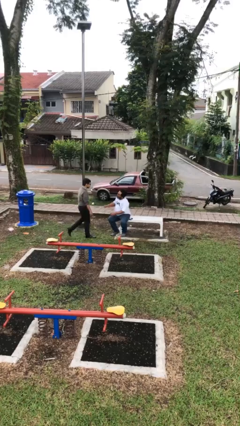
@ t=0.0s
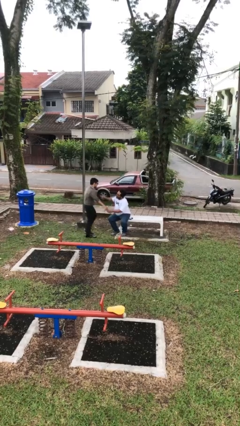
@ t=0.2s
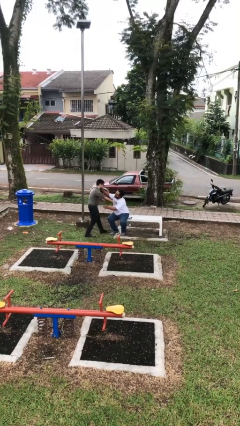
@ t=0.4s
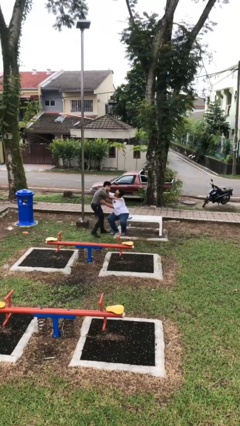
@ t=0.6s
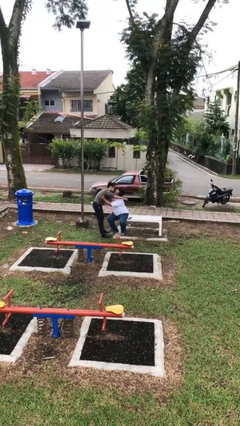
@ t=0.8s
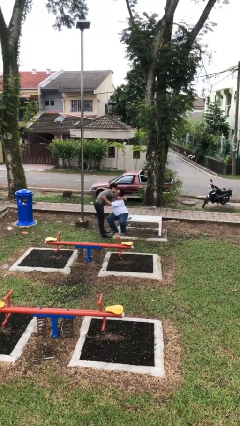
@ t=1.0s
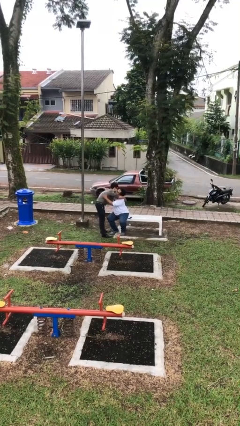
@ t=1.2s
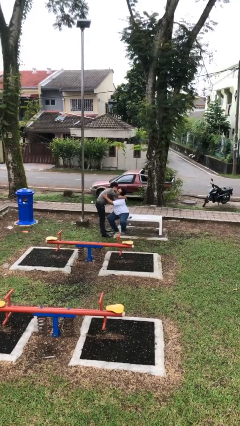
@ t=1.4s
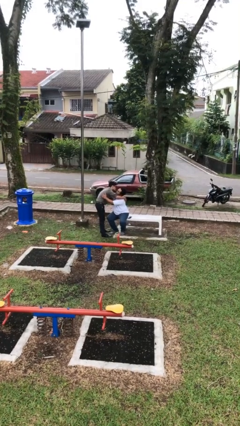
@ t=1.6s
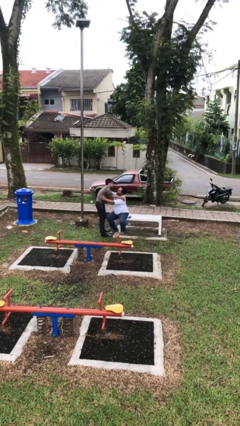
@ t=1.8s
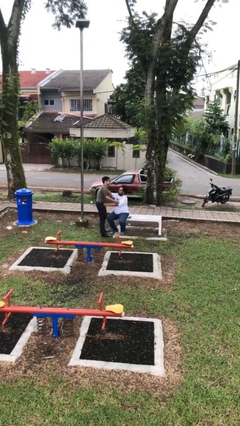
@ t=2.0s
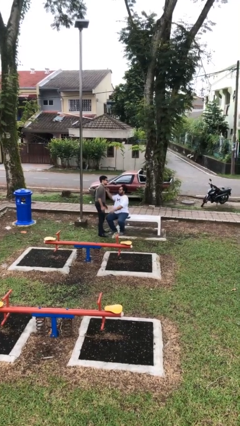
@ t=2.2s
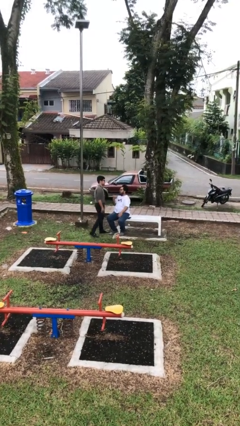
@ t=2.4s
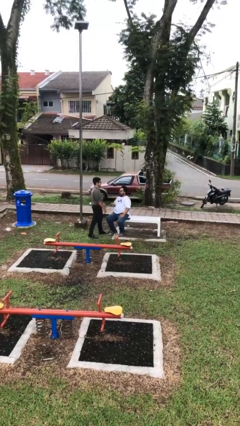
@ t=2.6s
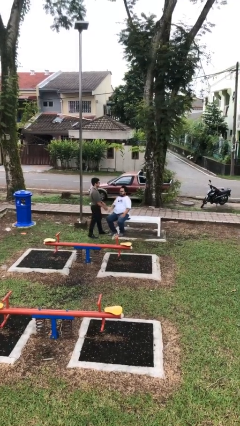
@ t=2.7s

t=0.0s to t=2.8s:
person embraces person

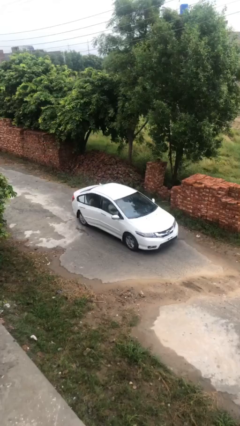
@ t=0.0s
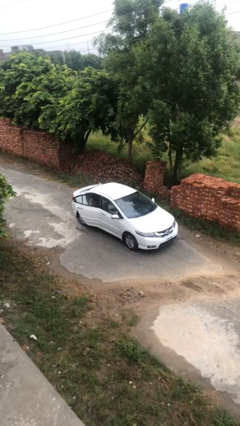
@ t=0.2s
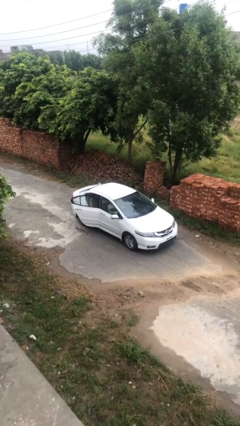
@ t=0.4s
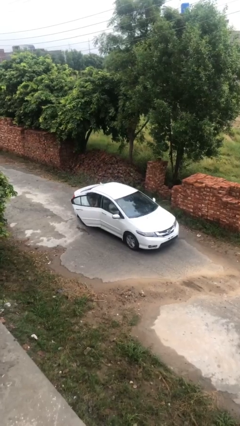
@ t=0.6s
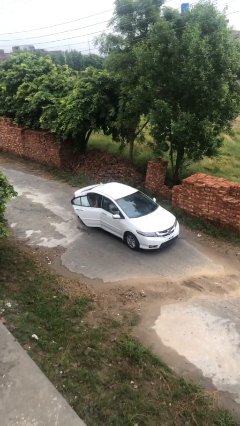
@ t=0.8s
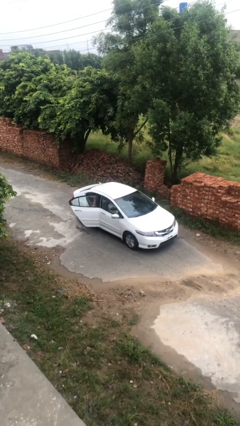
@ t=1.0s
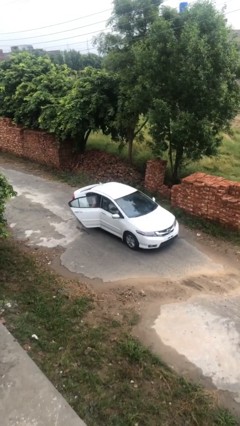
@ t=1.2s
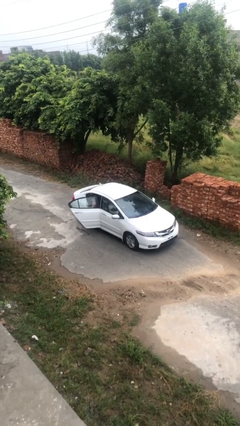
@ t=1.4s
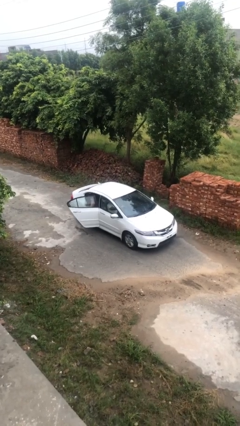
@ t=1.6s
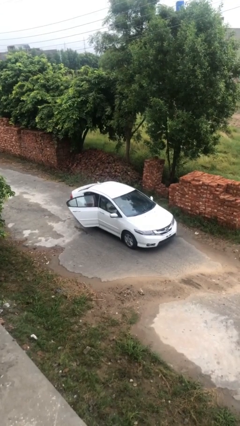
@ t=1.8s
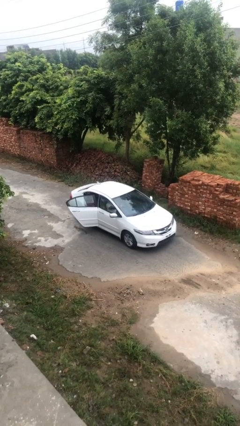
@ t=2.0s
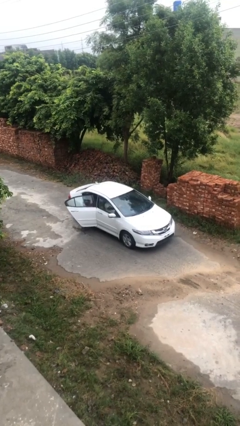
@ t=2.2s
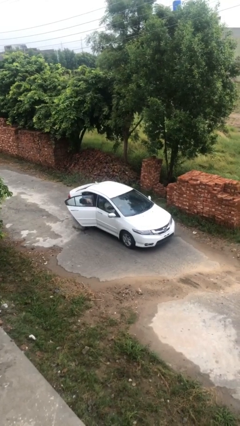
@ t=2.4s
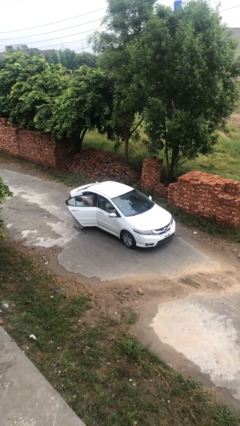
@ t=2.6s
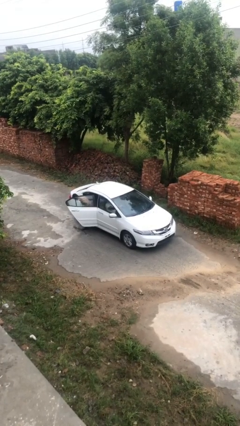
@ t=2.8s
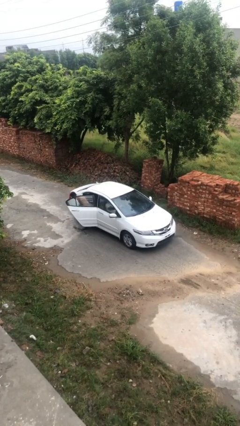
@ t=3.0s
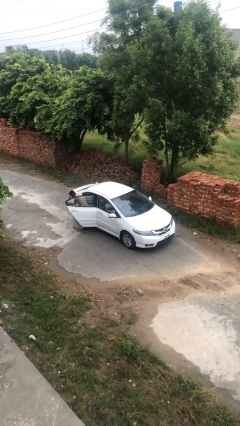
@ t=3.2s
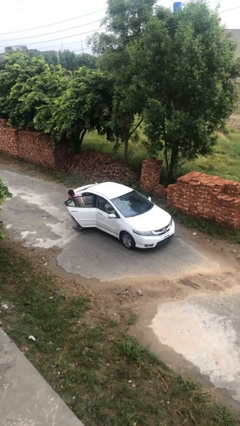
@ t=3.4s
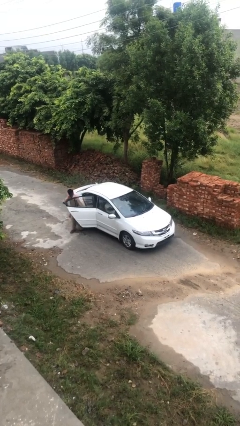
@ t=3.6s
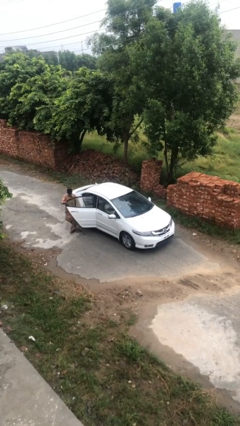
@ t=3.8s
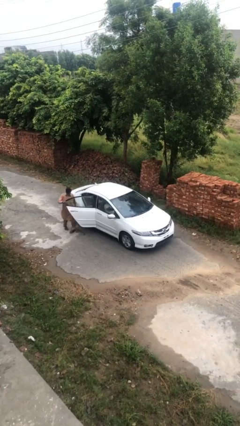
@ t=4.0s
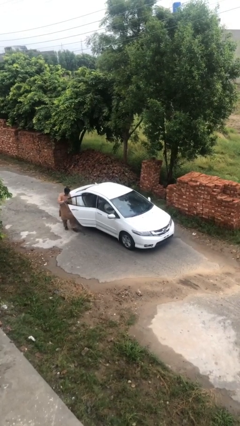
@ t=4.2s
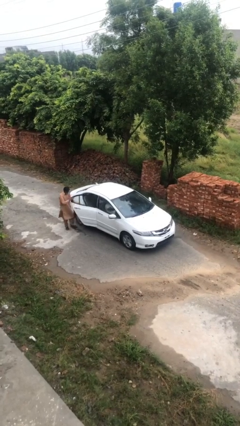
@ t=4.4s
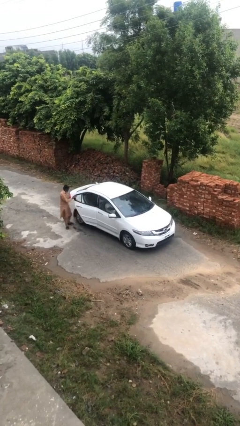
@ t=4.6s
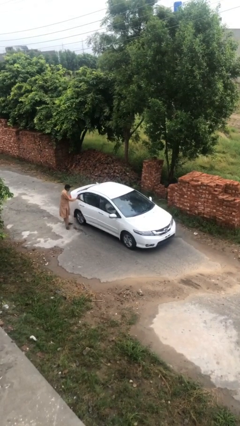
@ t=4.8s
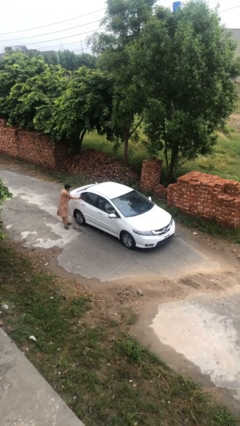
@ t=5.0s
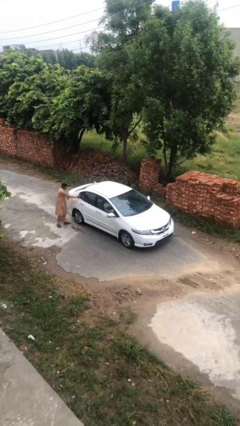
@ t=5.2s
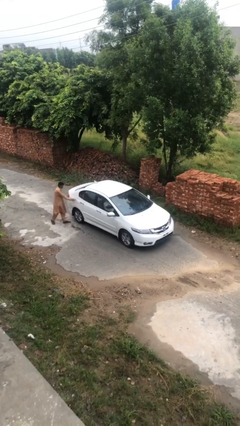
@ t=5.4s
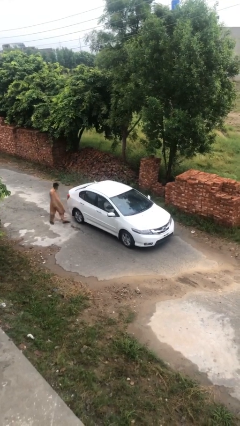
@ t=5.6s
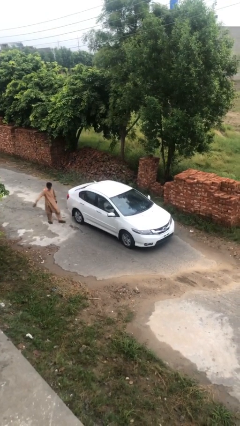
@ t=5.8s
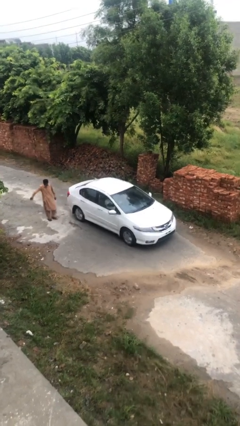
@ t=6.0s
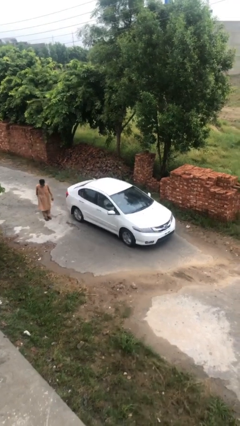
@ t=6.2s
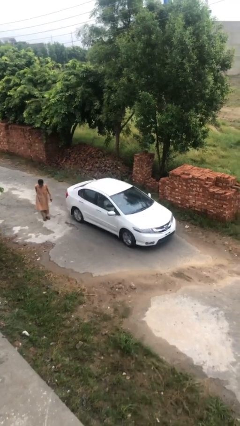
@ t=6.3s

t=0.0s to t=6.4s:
car drops off person

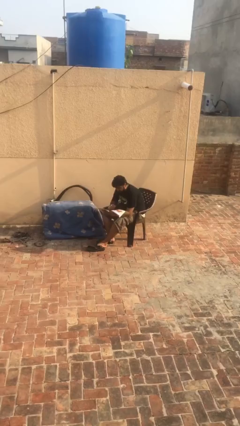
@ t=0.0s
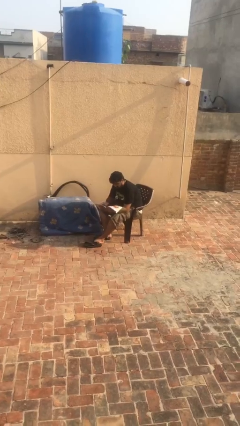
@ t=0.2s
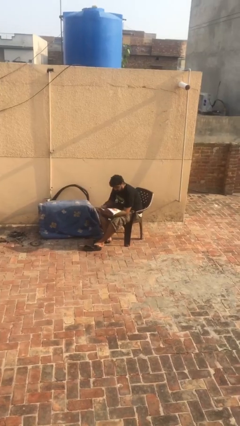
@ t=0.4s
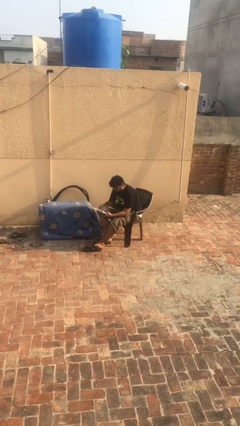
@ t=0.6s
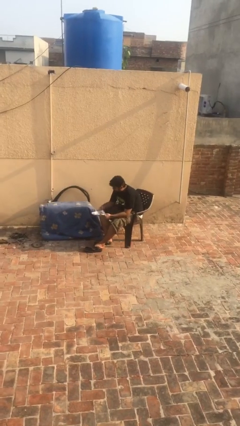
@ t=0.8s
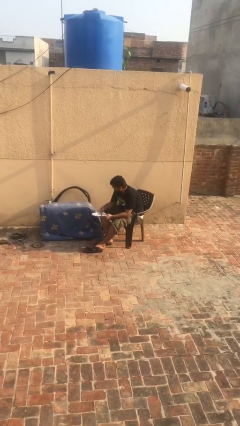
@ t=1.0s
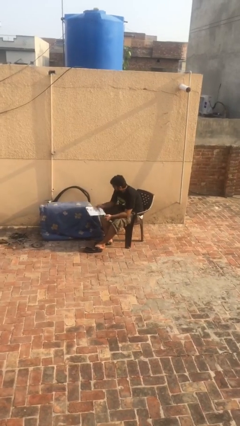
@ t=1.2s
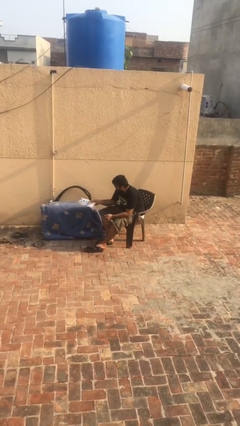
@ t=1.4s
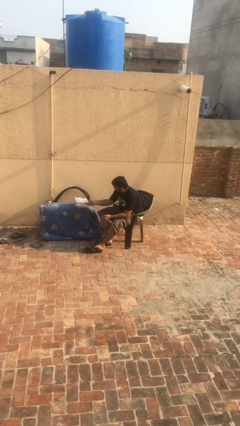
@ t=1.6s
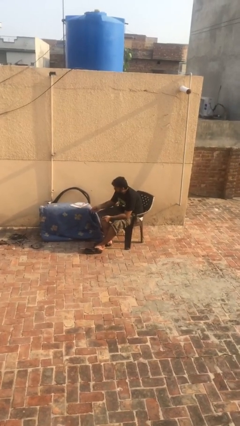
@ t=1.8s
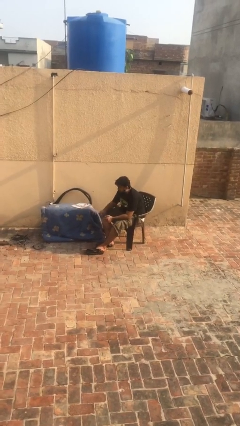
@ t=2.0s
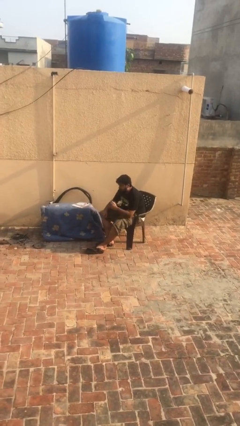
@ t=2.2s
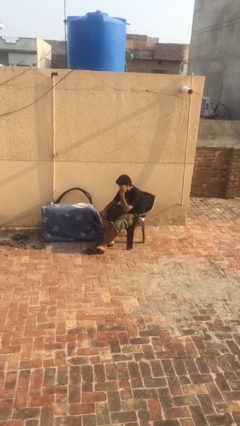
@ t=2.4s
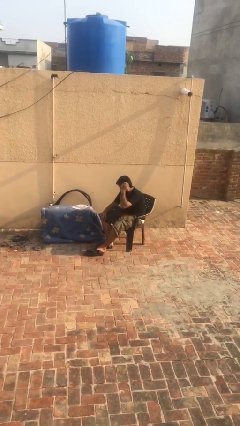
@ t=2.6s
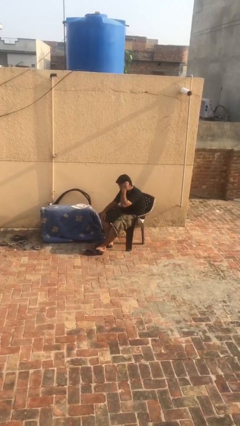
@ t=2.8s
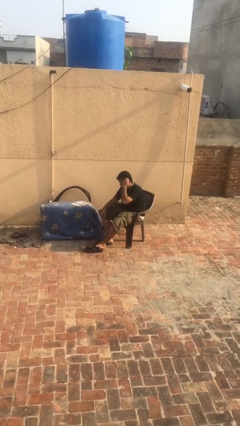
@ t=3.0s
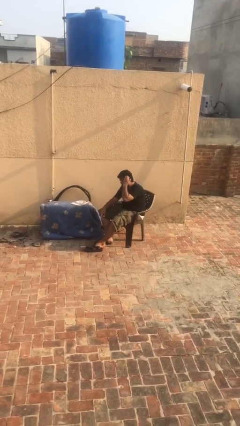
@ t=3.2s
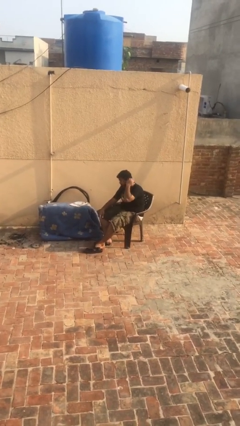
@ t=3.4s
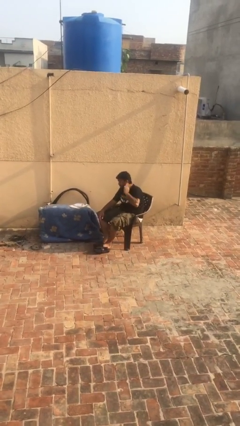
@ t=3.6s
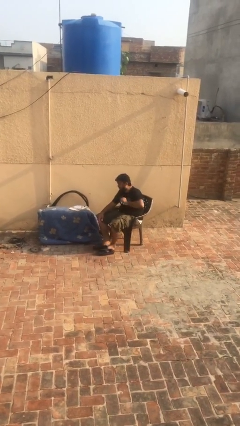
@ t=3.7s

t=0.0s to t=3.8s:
person puts down object on table

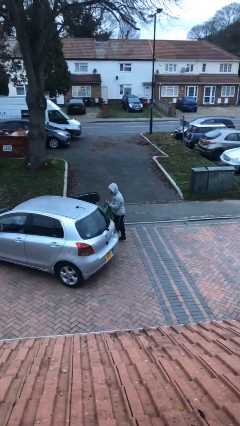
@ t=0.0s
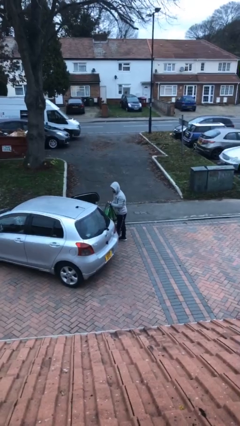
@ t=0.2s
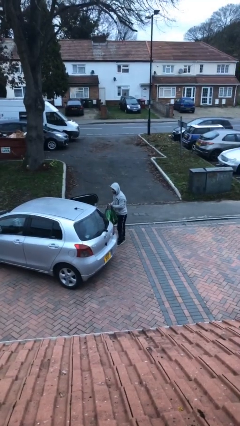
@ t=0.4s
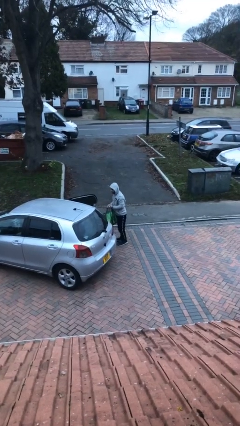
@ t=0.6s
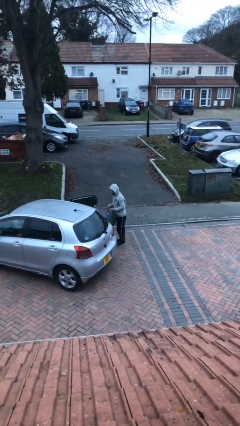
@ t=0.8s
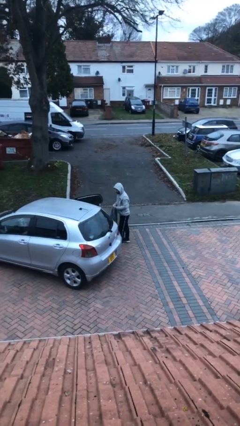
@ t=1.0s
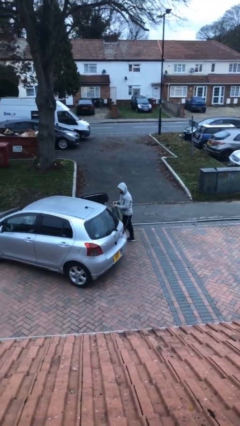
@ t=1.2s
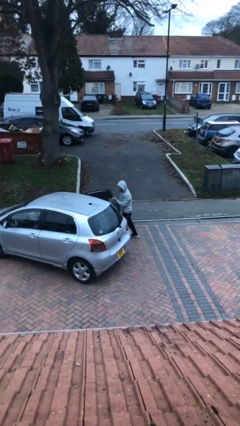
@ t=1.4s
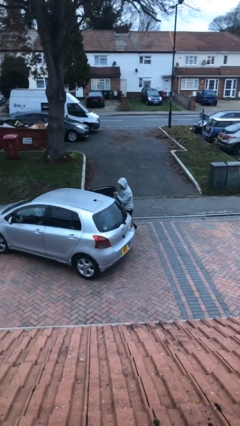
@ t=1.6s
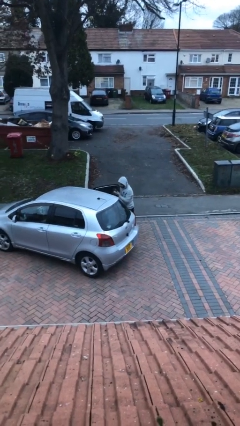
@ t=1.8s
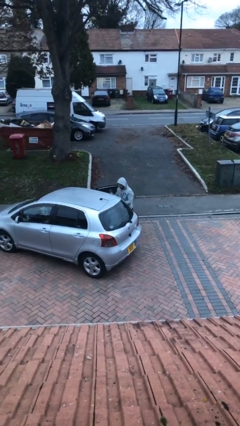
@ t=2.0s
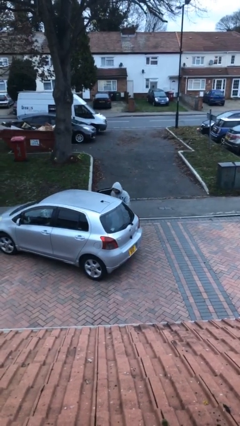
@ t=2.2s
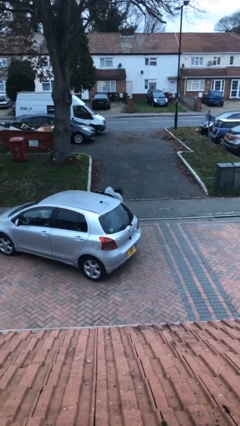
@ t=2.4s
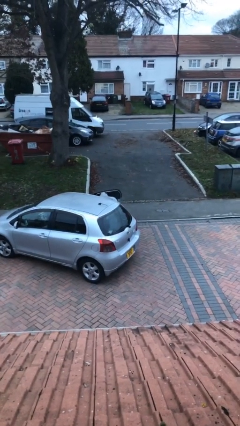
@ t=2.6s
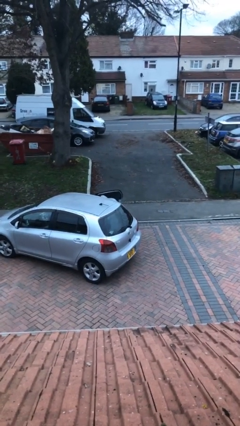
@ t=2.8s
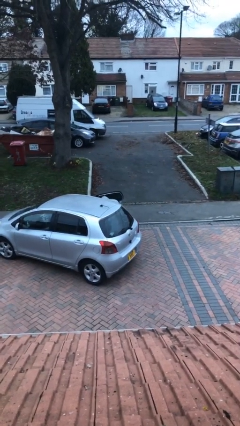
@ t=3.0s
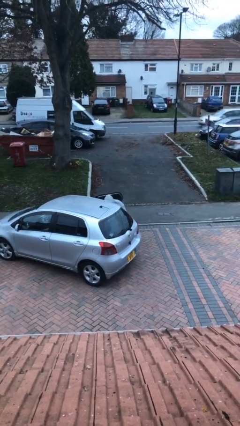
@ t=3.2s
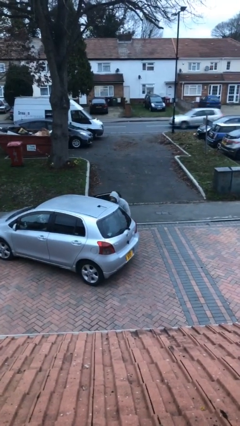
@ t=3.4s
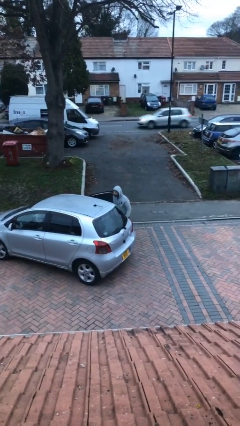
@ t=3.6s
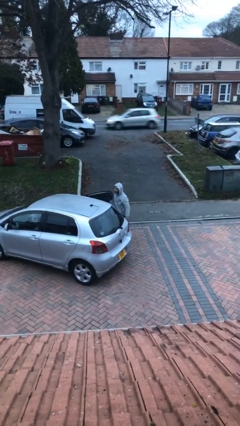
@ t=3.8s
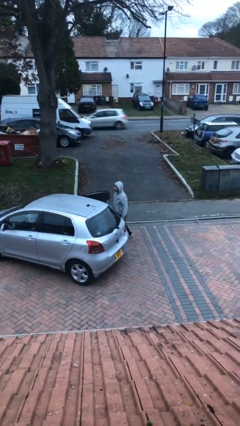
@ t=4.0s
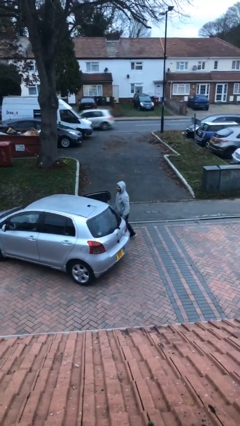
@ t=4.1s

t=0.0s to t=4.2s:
person loads car

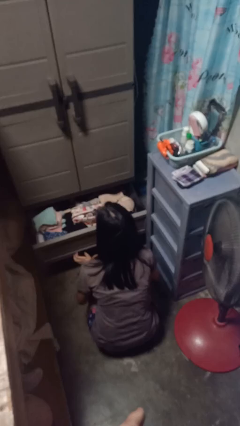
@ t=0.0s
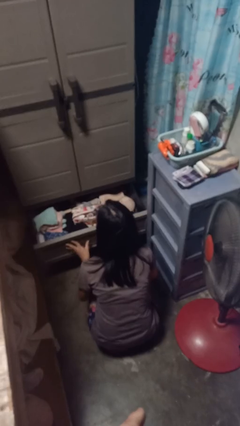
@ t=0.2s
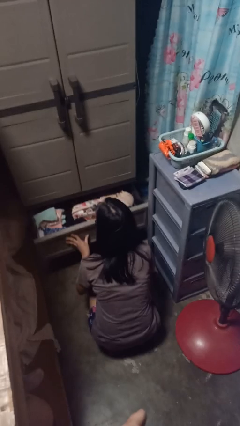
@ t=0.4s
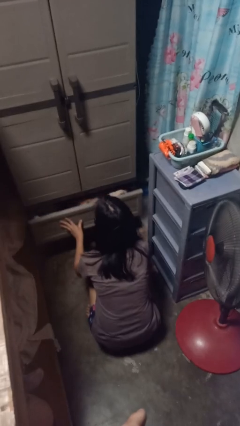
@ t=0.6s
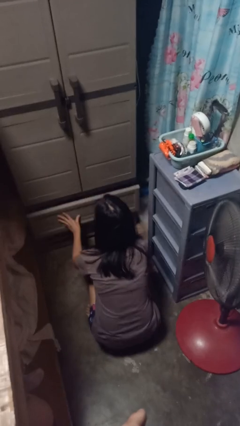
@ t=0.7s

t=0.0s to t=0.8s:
person closes dresser drawer
